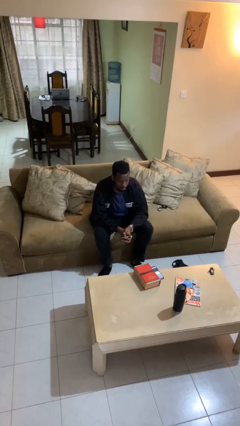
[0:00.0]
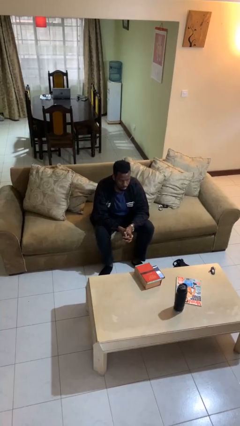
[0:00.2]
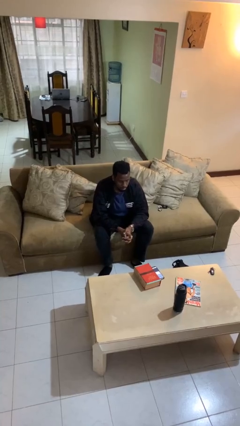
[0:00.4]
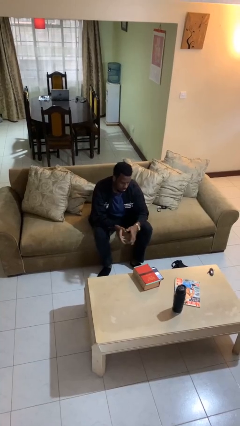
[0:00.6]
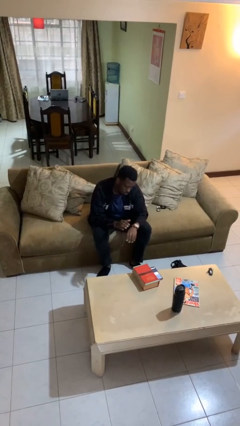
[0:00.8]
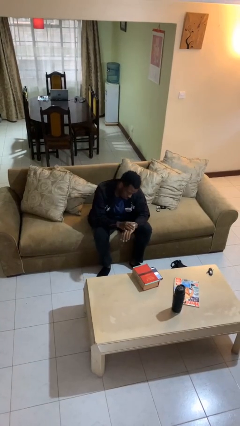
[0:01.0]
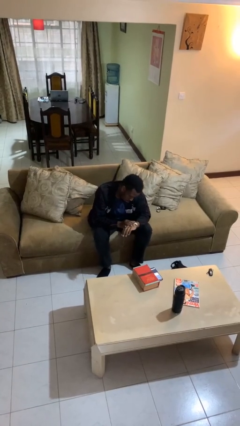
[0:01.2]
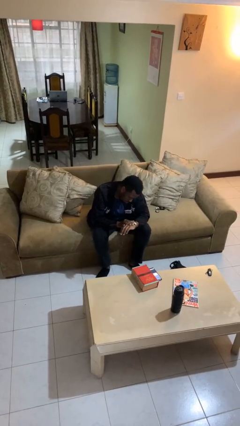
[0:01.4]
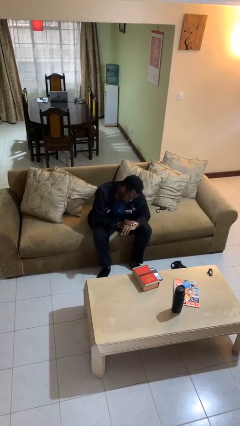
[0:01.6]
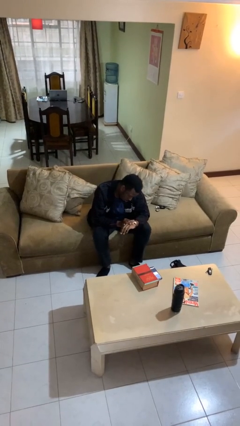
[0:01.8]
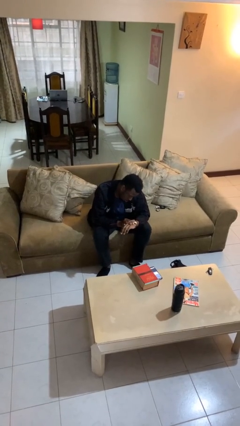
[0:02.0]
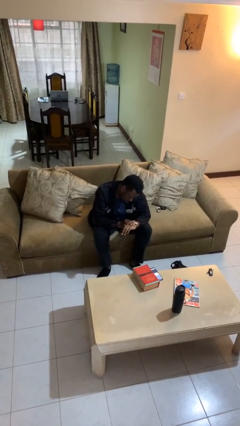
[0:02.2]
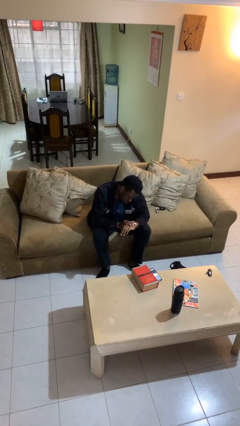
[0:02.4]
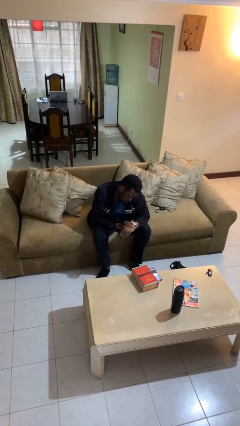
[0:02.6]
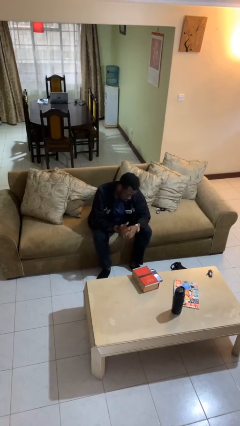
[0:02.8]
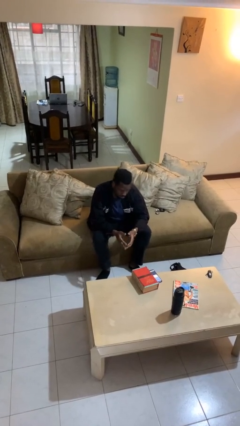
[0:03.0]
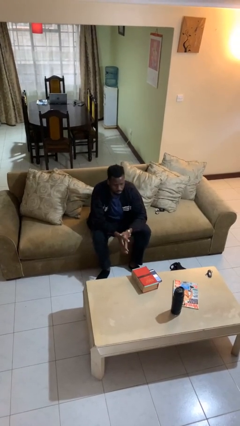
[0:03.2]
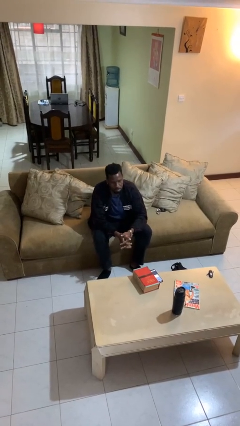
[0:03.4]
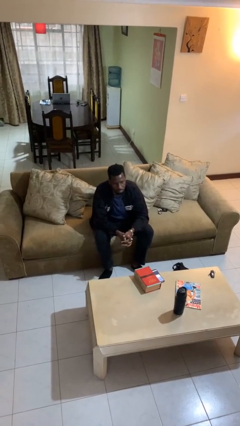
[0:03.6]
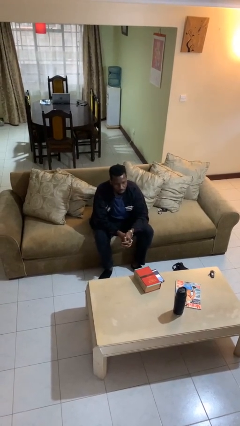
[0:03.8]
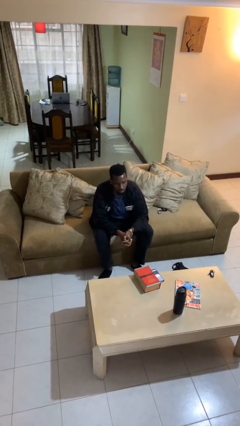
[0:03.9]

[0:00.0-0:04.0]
person looks at wristwatch

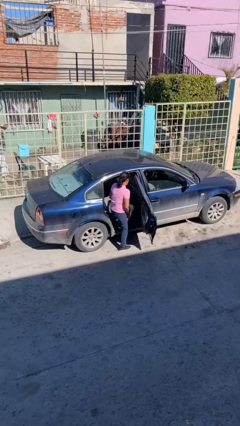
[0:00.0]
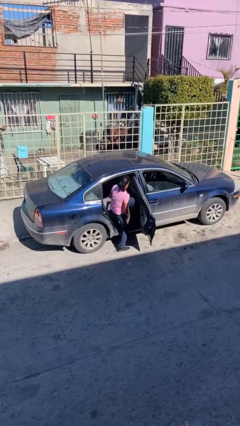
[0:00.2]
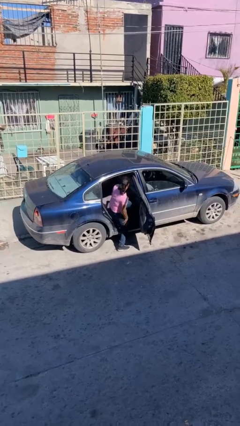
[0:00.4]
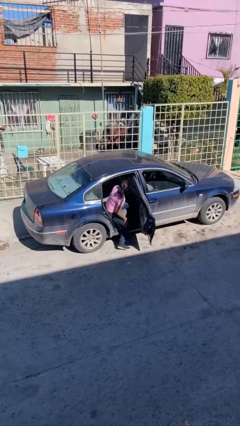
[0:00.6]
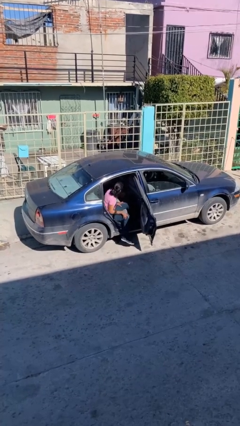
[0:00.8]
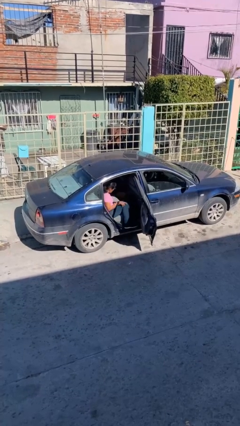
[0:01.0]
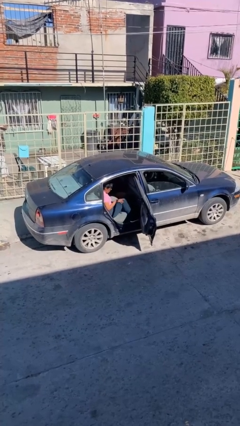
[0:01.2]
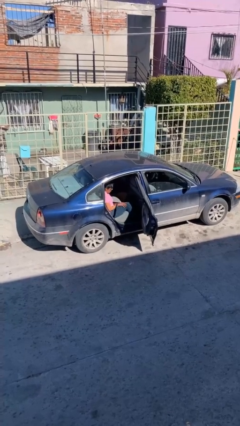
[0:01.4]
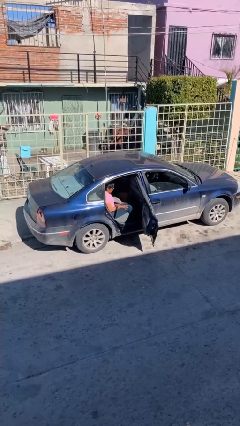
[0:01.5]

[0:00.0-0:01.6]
person enters car

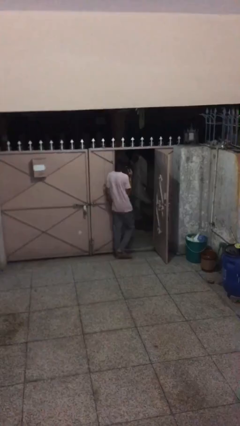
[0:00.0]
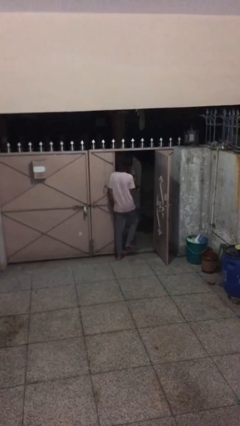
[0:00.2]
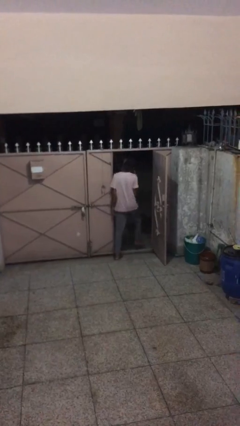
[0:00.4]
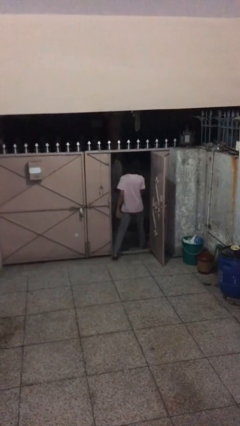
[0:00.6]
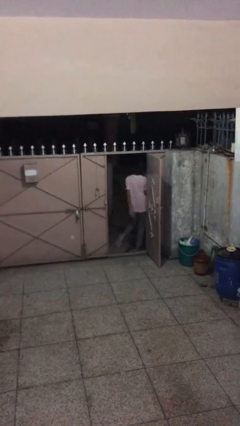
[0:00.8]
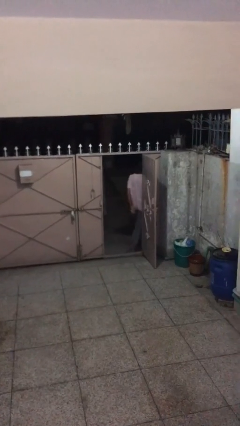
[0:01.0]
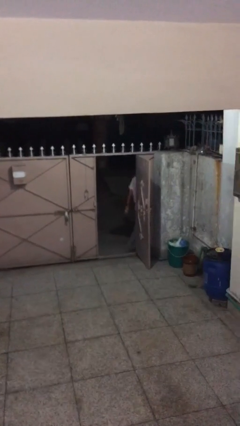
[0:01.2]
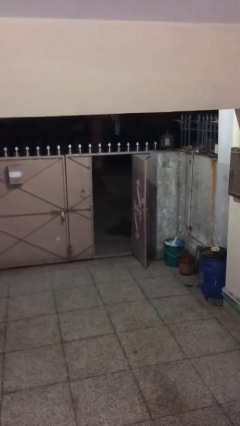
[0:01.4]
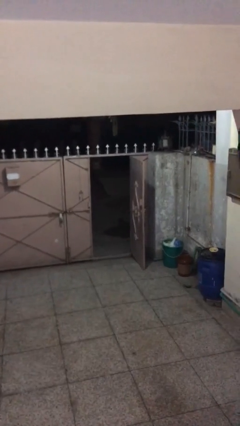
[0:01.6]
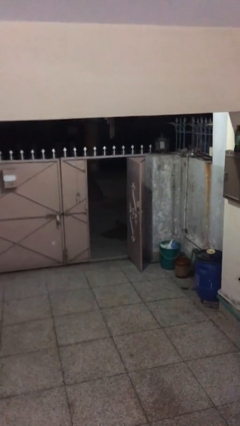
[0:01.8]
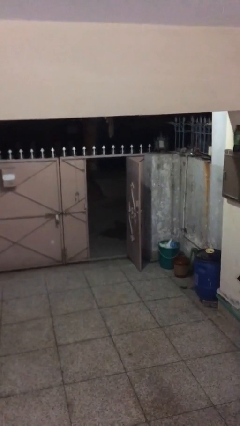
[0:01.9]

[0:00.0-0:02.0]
person exits scene through structure

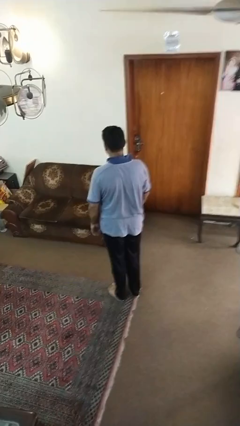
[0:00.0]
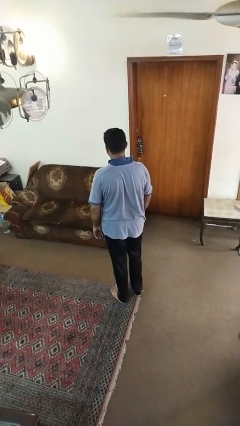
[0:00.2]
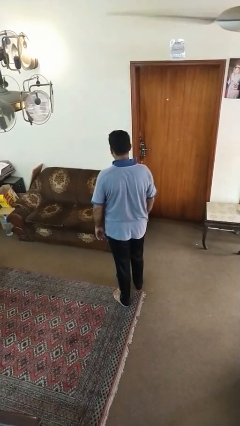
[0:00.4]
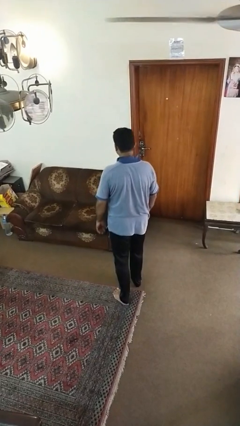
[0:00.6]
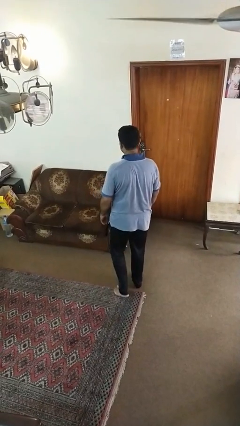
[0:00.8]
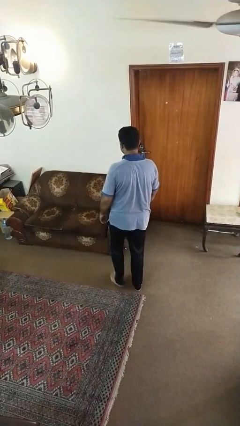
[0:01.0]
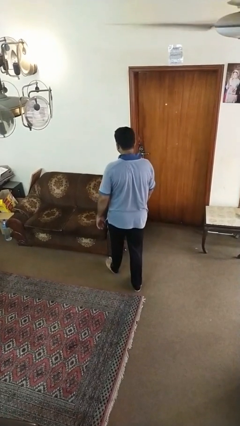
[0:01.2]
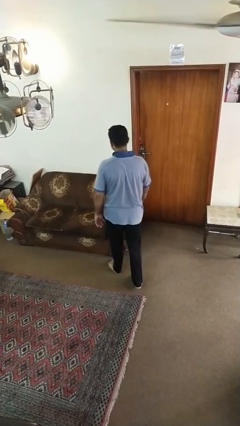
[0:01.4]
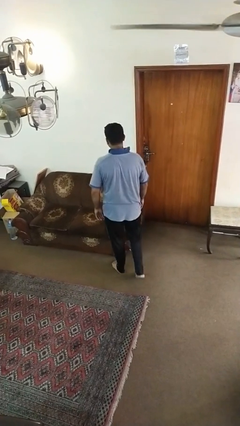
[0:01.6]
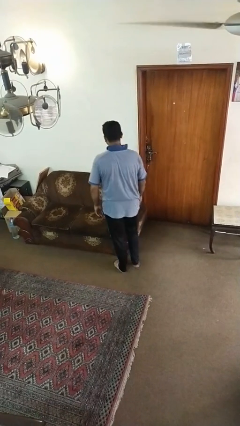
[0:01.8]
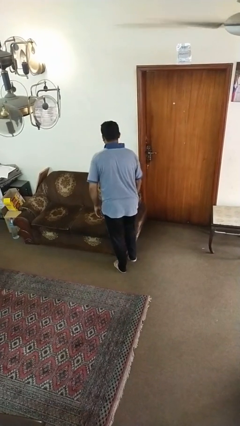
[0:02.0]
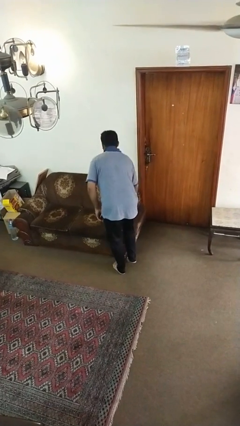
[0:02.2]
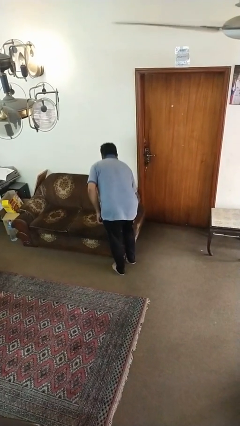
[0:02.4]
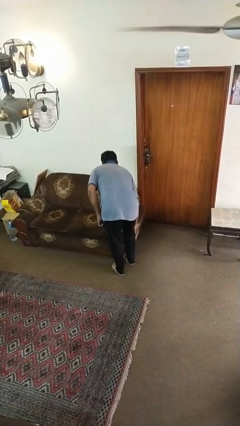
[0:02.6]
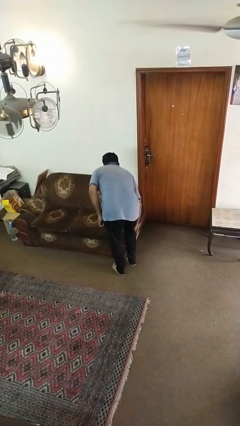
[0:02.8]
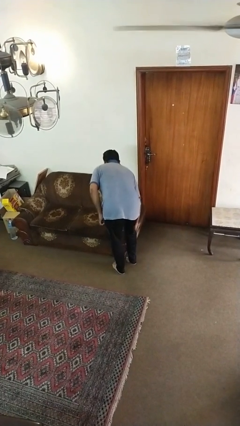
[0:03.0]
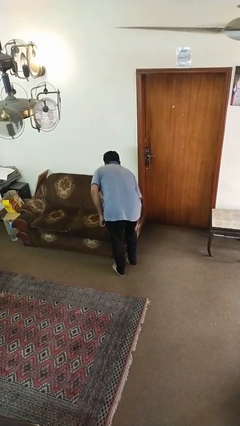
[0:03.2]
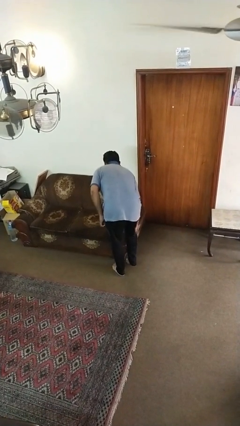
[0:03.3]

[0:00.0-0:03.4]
person stubs toe

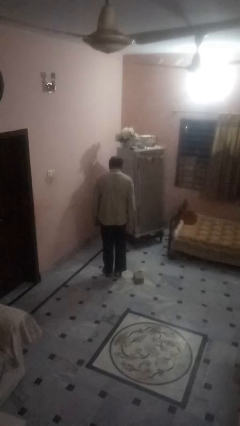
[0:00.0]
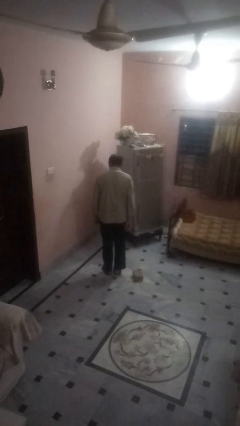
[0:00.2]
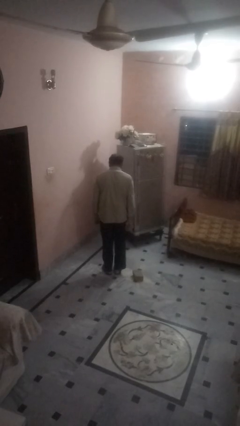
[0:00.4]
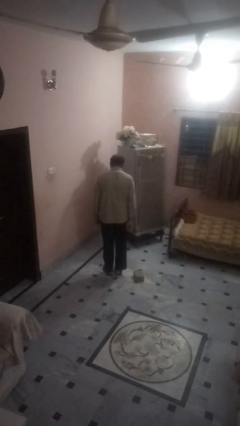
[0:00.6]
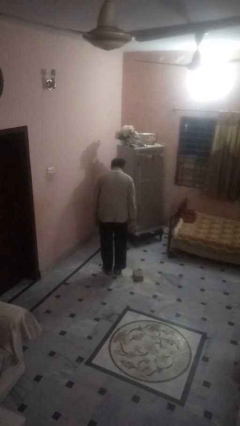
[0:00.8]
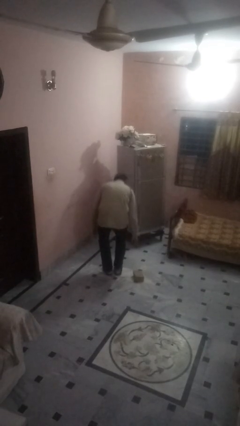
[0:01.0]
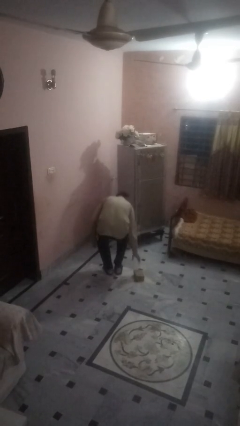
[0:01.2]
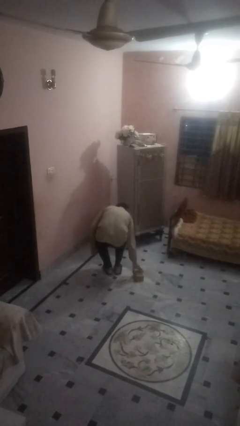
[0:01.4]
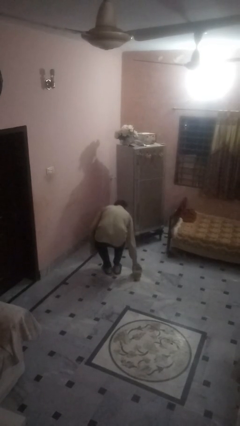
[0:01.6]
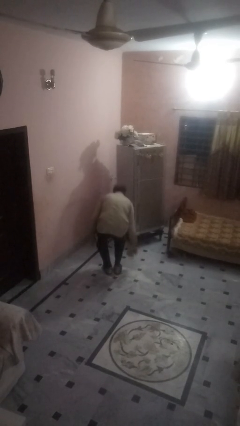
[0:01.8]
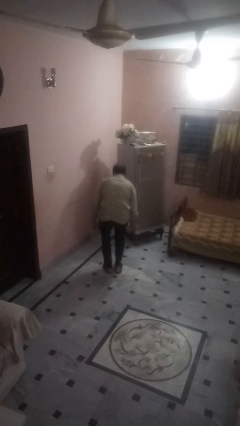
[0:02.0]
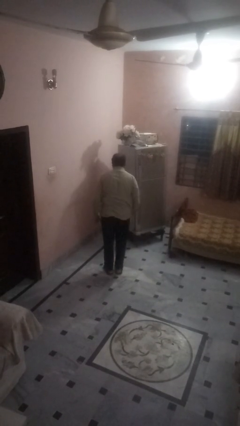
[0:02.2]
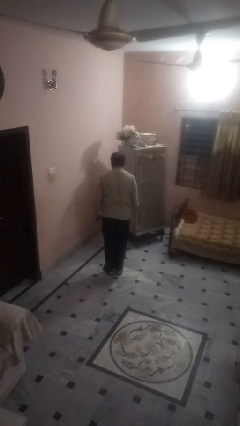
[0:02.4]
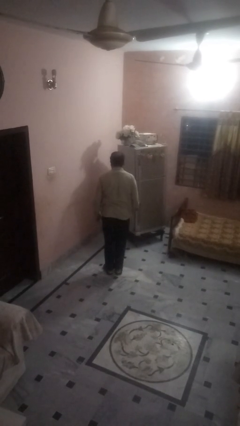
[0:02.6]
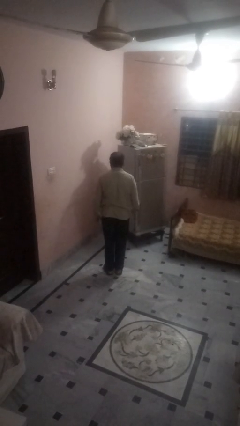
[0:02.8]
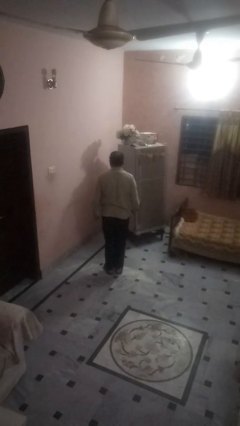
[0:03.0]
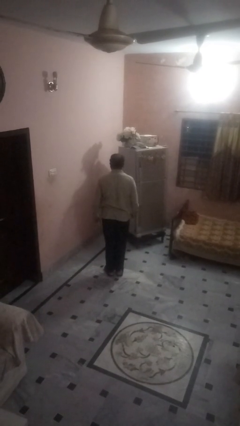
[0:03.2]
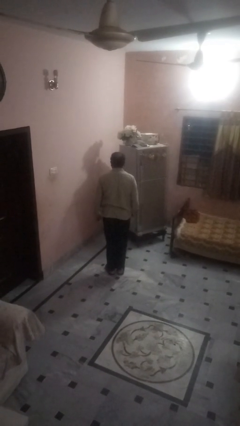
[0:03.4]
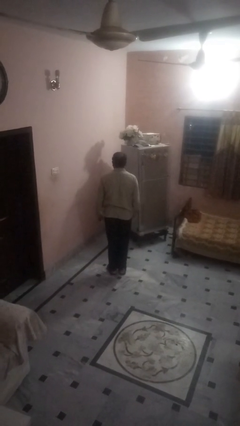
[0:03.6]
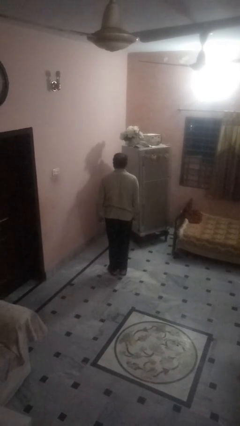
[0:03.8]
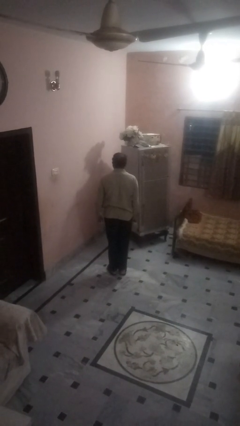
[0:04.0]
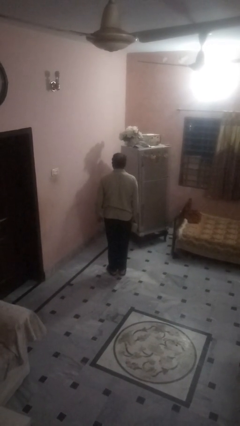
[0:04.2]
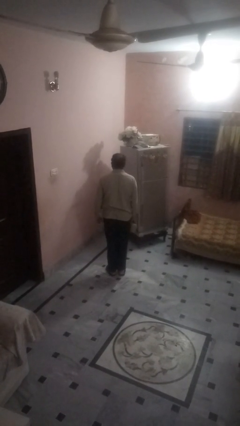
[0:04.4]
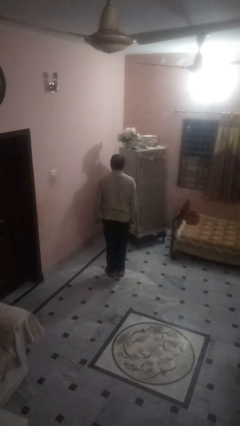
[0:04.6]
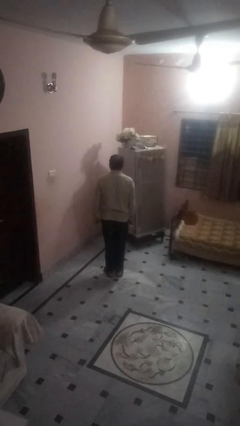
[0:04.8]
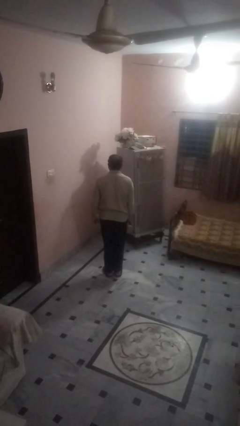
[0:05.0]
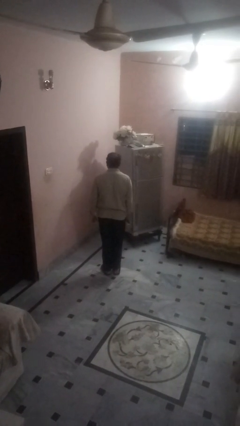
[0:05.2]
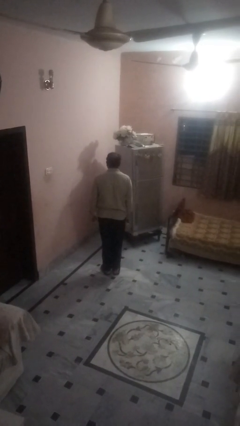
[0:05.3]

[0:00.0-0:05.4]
person picks up object from floor

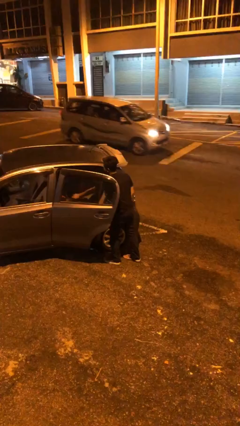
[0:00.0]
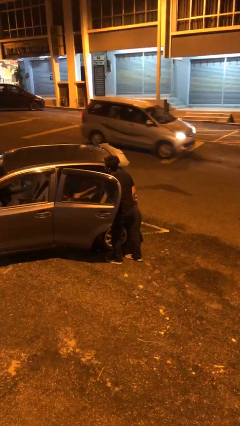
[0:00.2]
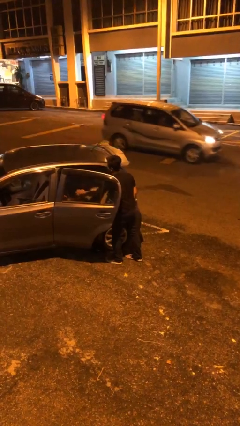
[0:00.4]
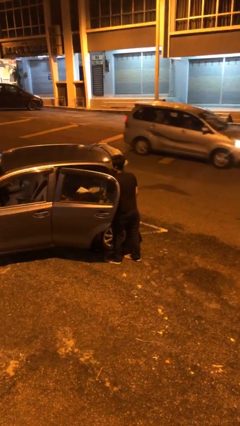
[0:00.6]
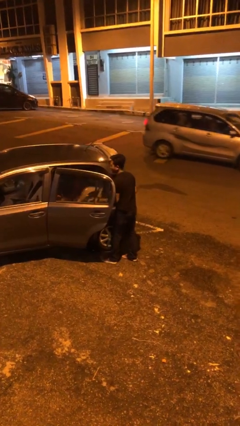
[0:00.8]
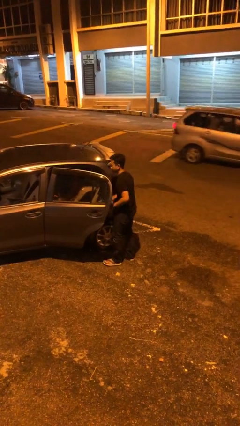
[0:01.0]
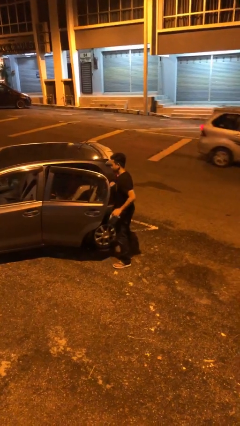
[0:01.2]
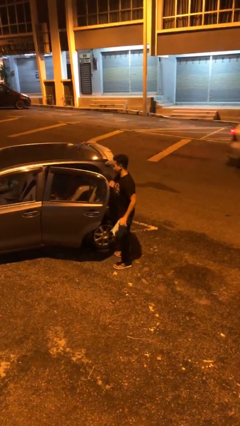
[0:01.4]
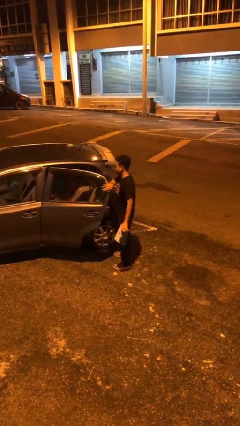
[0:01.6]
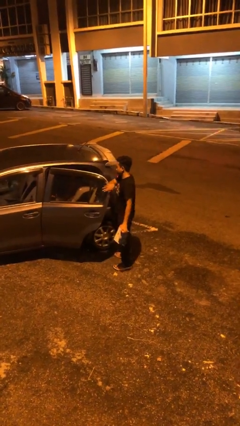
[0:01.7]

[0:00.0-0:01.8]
person unloads car
